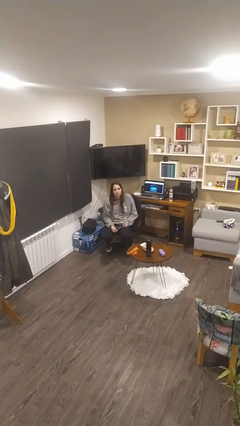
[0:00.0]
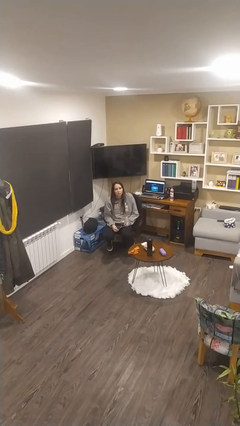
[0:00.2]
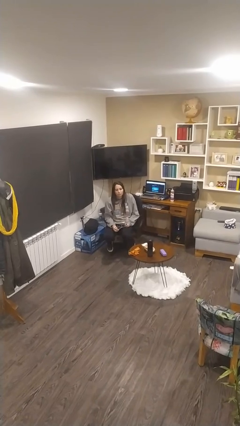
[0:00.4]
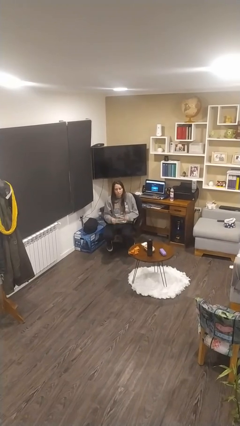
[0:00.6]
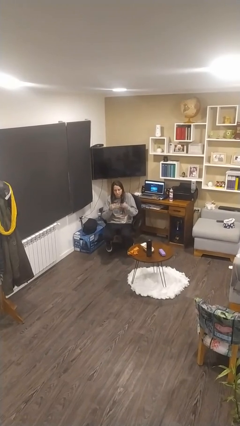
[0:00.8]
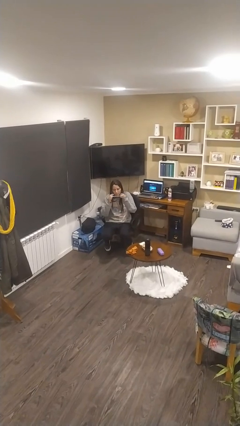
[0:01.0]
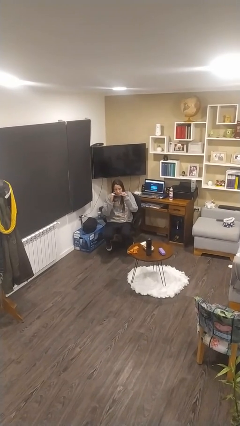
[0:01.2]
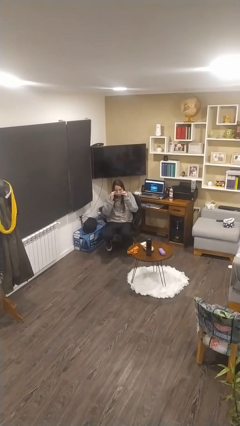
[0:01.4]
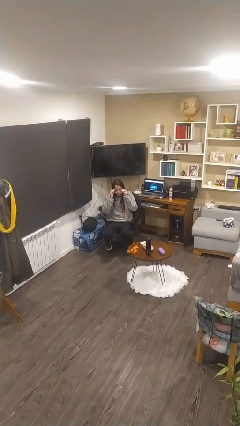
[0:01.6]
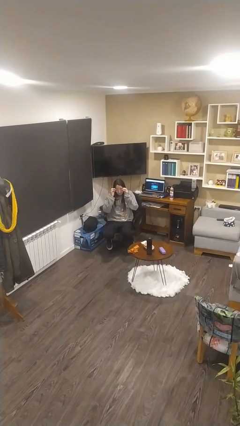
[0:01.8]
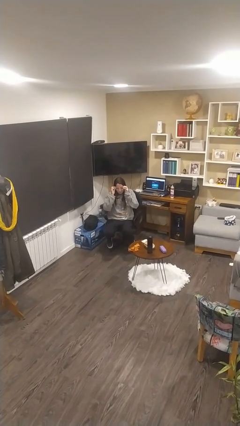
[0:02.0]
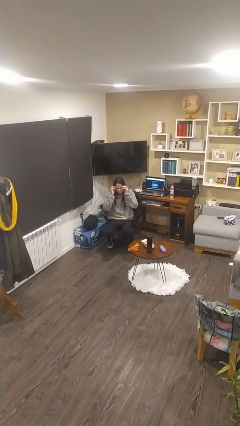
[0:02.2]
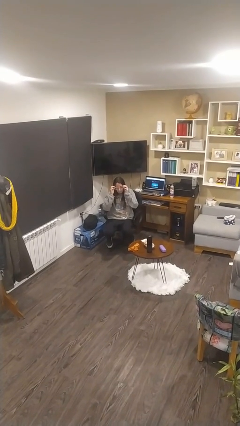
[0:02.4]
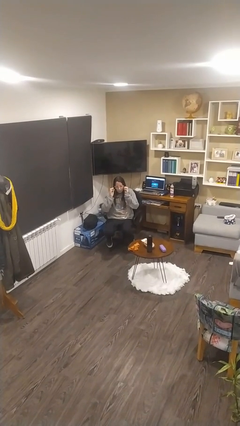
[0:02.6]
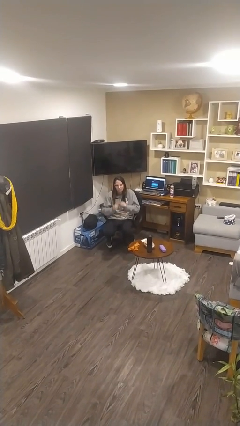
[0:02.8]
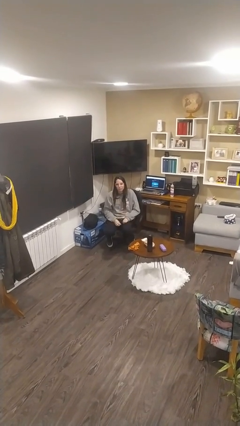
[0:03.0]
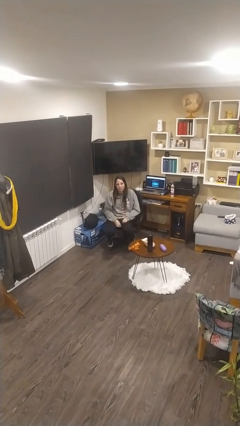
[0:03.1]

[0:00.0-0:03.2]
person puts on glasses

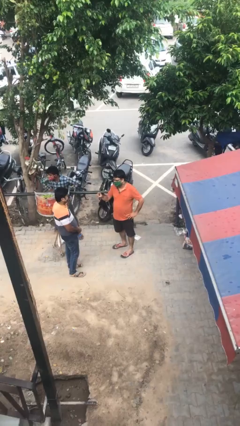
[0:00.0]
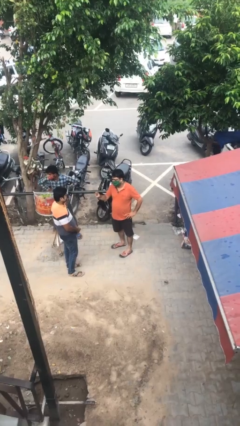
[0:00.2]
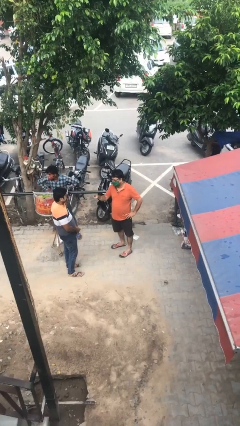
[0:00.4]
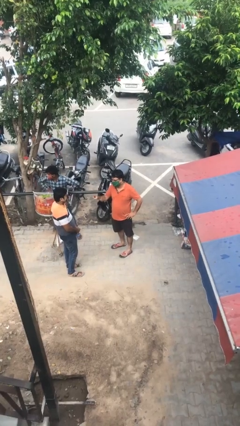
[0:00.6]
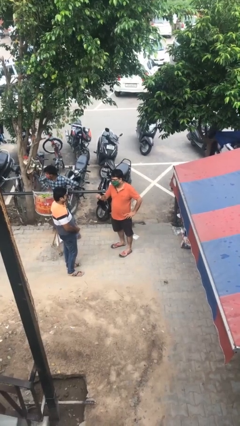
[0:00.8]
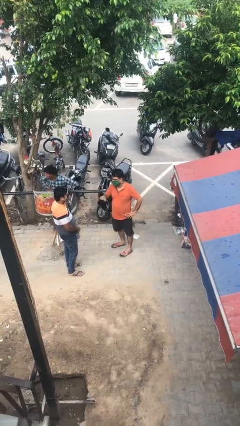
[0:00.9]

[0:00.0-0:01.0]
person points at person

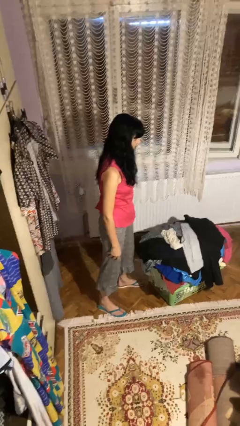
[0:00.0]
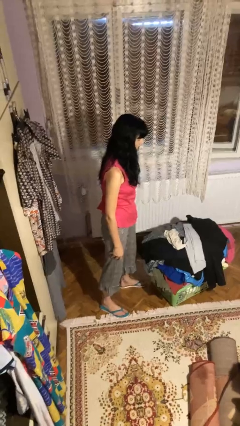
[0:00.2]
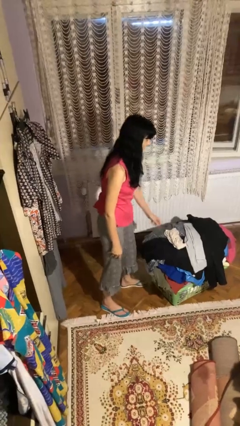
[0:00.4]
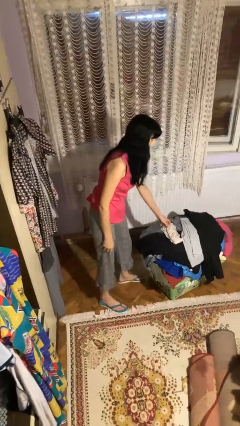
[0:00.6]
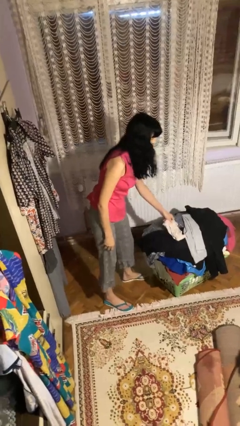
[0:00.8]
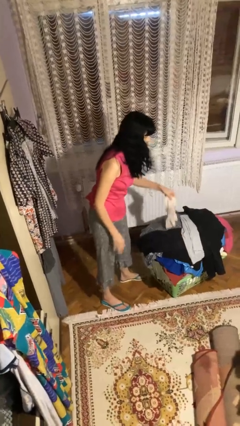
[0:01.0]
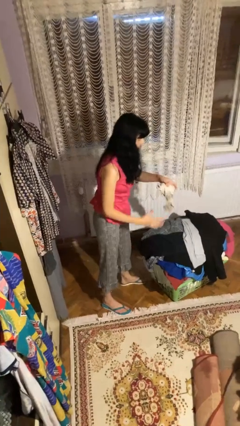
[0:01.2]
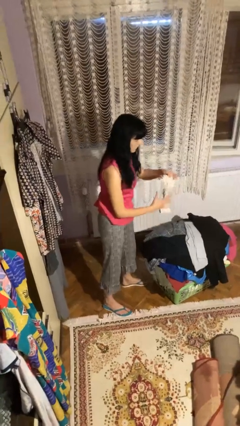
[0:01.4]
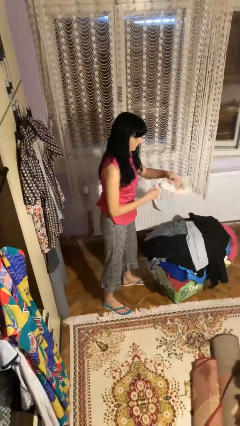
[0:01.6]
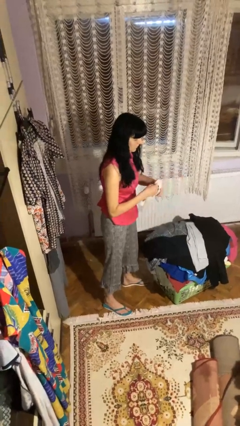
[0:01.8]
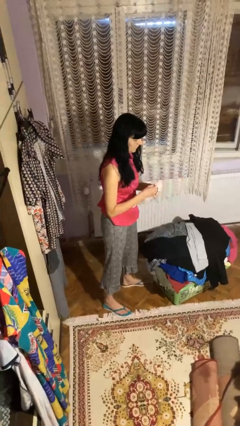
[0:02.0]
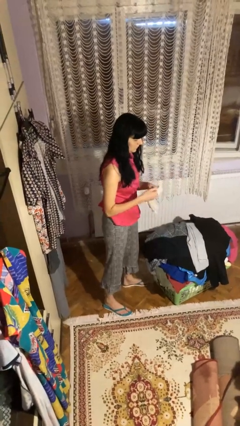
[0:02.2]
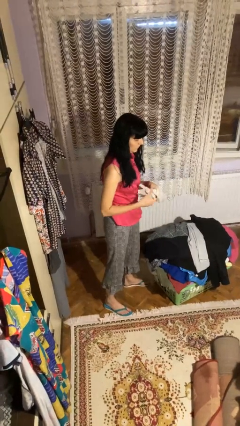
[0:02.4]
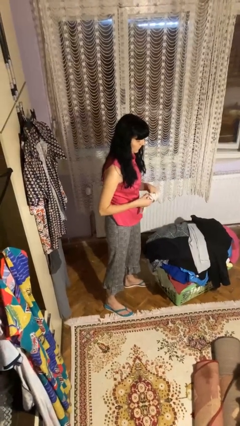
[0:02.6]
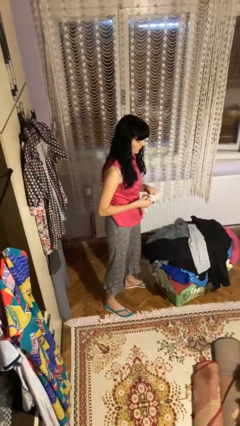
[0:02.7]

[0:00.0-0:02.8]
person folds socks

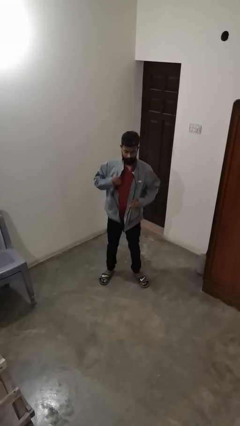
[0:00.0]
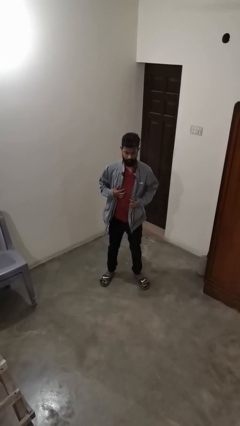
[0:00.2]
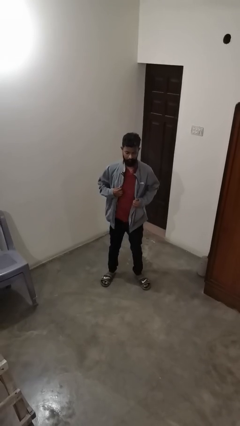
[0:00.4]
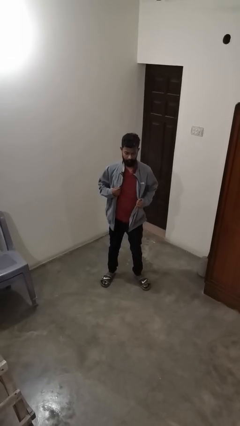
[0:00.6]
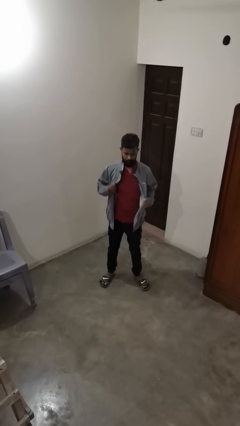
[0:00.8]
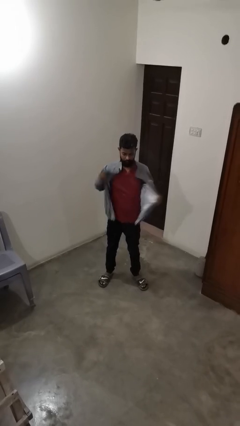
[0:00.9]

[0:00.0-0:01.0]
person unzips jacket

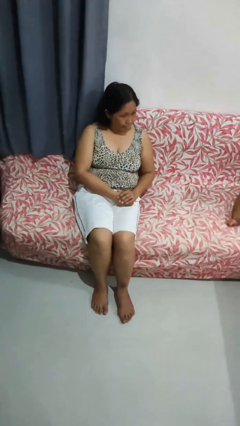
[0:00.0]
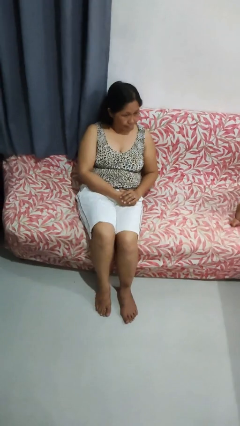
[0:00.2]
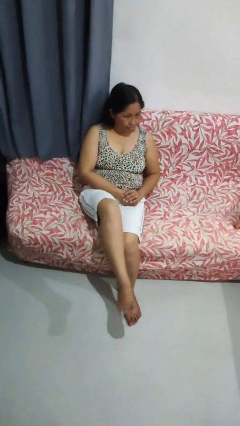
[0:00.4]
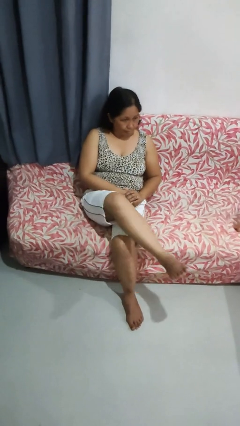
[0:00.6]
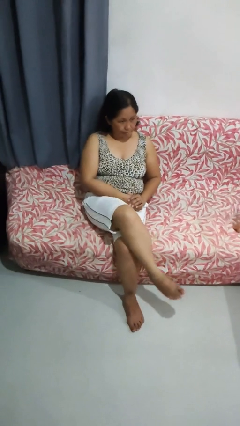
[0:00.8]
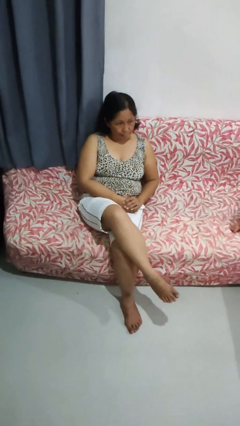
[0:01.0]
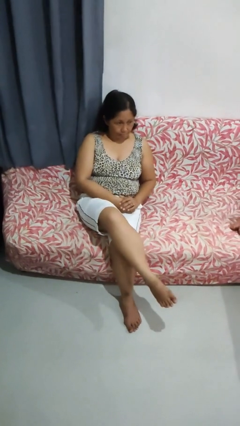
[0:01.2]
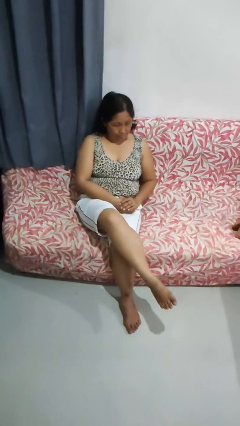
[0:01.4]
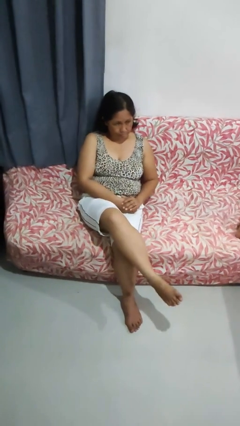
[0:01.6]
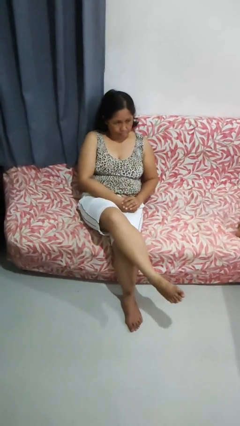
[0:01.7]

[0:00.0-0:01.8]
person crosses legs

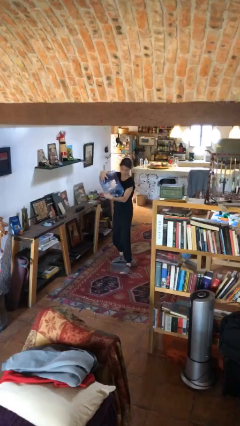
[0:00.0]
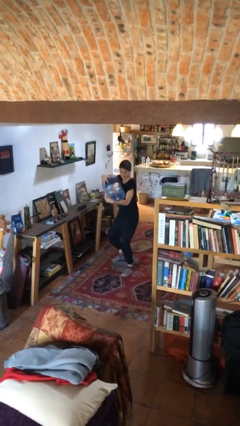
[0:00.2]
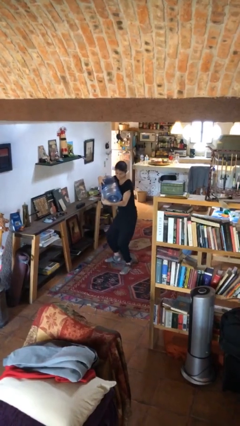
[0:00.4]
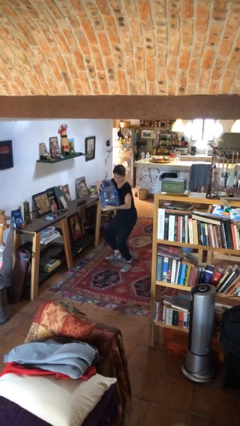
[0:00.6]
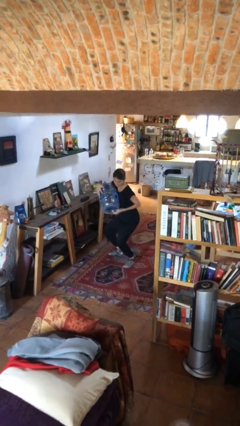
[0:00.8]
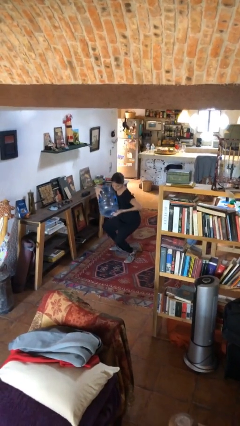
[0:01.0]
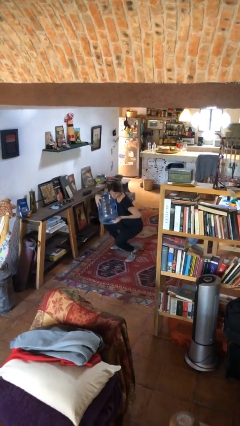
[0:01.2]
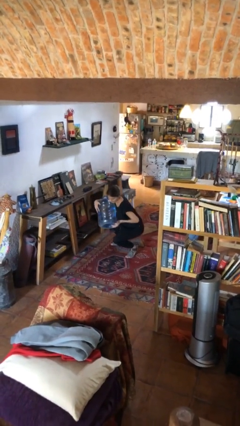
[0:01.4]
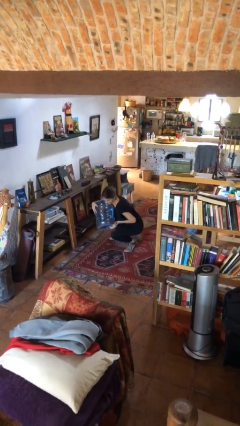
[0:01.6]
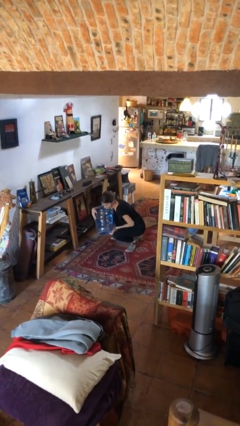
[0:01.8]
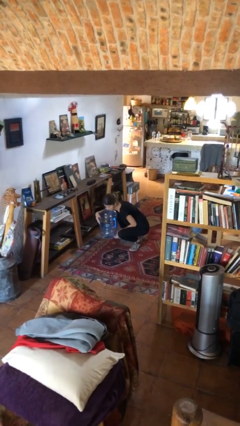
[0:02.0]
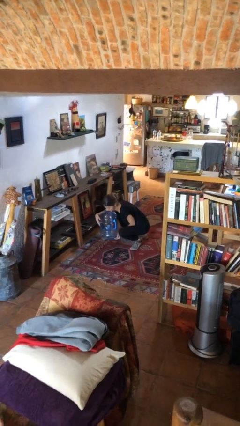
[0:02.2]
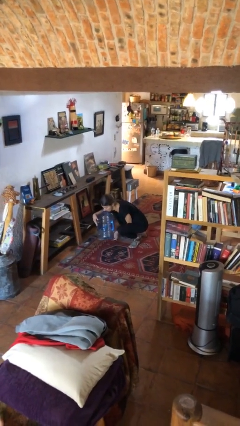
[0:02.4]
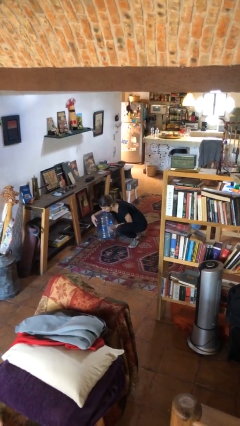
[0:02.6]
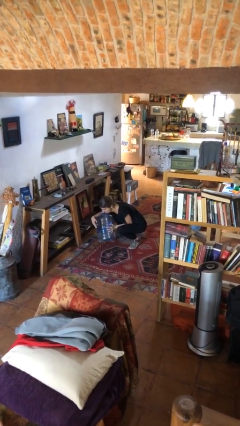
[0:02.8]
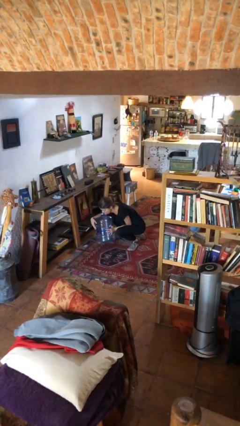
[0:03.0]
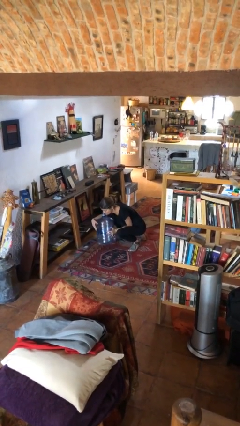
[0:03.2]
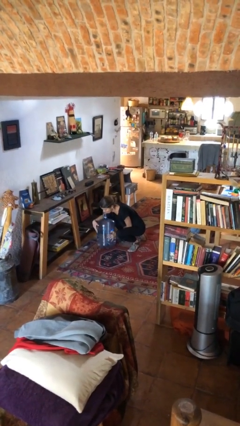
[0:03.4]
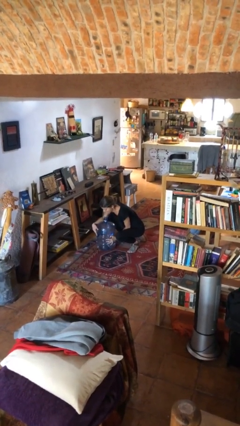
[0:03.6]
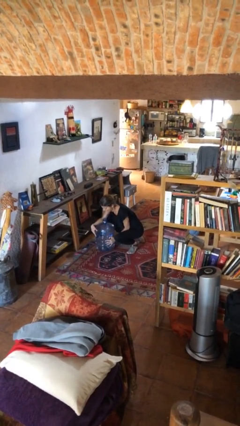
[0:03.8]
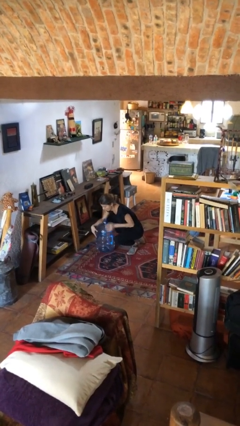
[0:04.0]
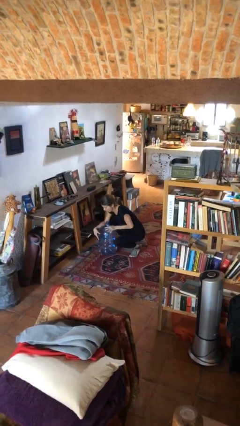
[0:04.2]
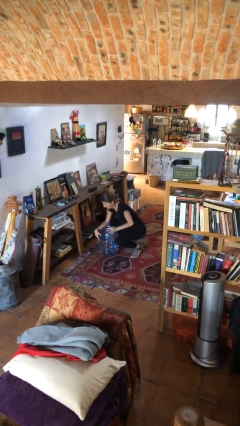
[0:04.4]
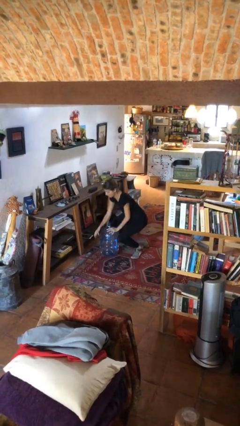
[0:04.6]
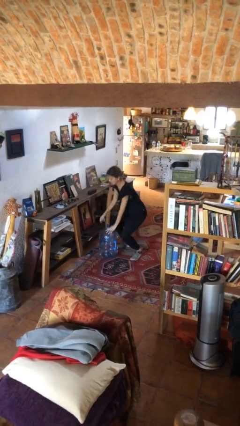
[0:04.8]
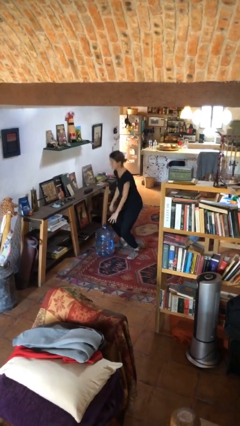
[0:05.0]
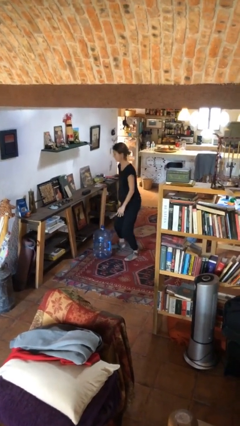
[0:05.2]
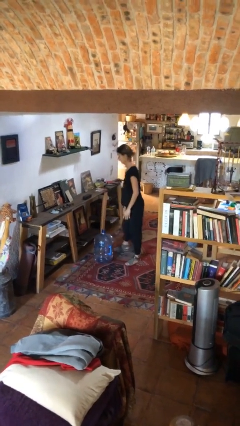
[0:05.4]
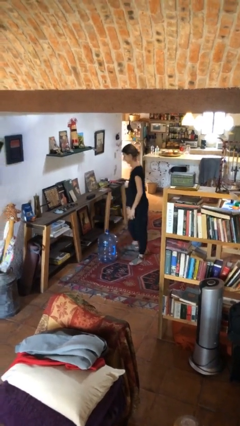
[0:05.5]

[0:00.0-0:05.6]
person puts down object on floor

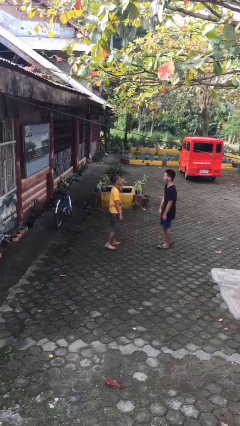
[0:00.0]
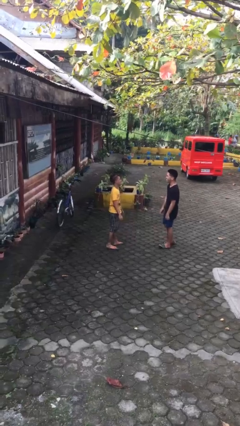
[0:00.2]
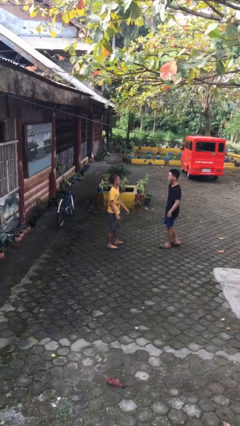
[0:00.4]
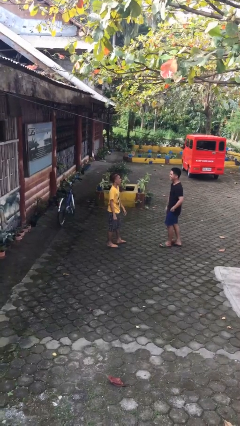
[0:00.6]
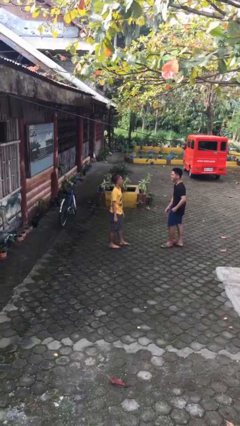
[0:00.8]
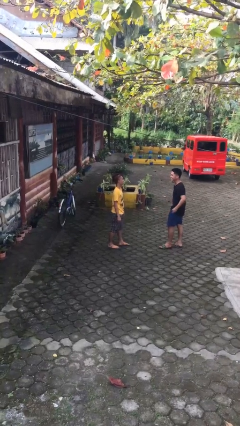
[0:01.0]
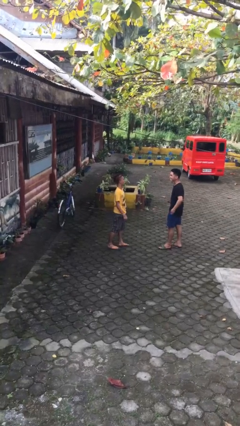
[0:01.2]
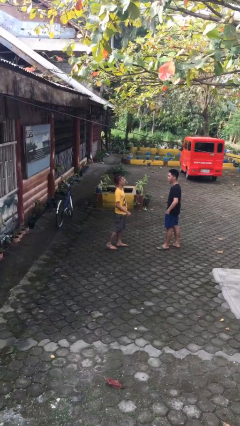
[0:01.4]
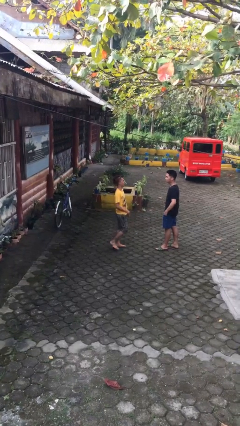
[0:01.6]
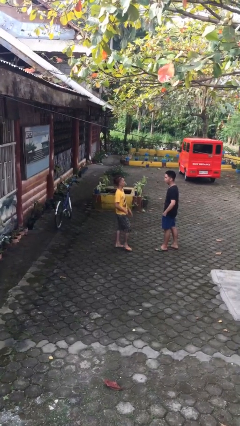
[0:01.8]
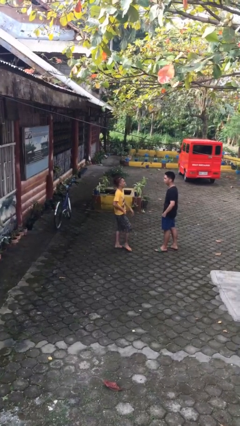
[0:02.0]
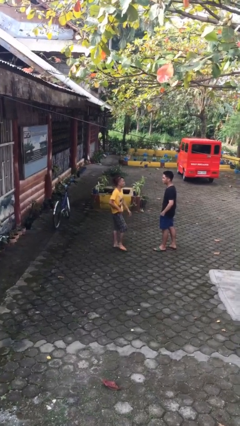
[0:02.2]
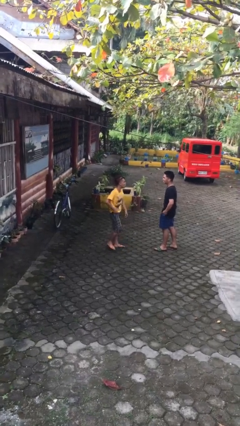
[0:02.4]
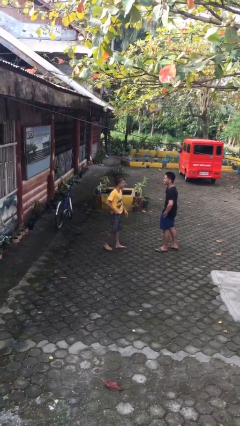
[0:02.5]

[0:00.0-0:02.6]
person talks to person
